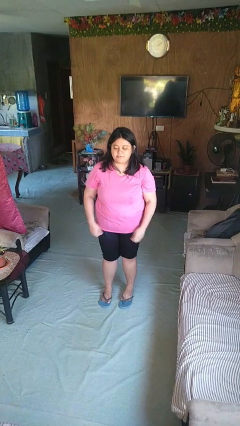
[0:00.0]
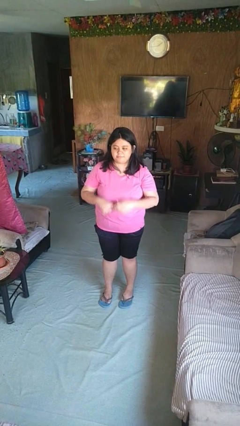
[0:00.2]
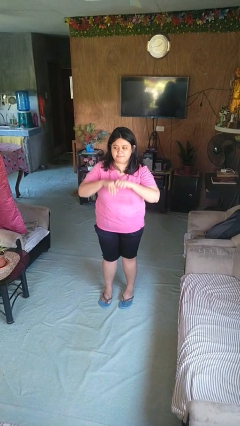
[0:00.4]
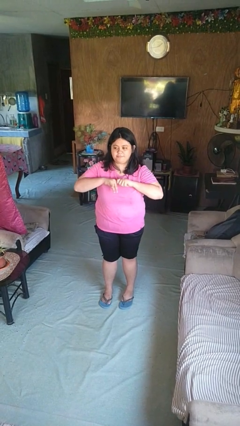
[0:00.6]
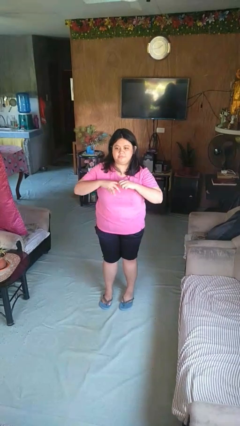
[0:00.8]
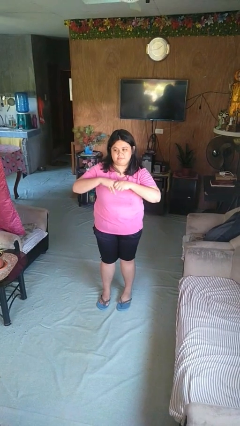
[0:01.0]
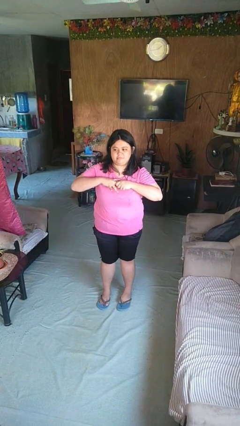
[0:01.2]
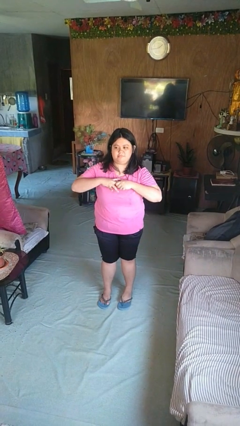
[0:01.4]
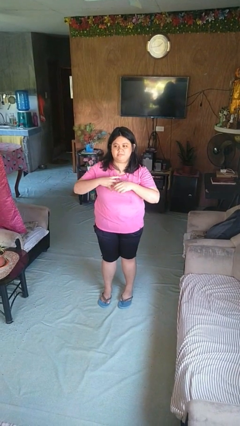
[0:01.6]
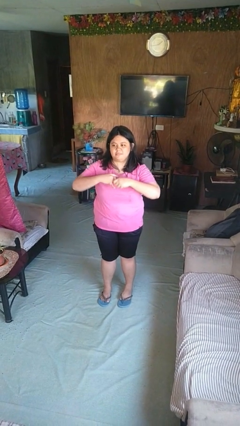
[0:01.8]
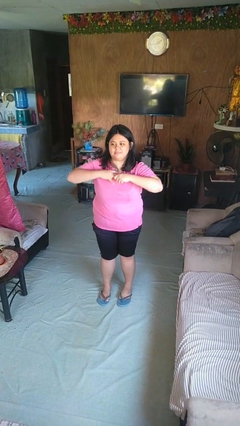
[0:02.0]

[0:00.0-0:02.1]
person cracks knuckles

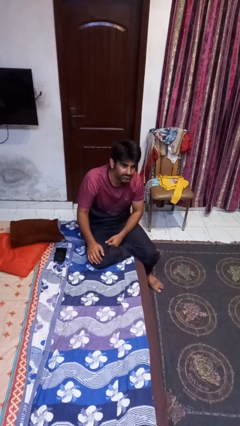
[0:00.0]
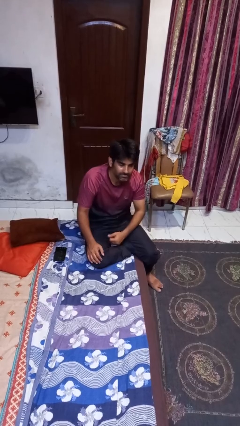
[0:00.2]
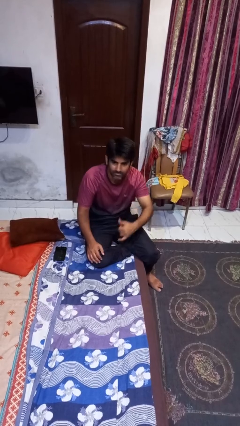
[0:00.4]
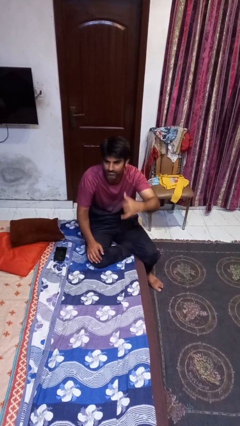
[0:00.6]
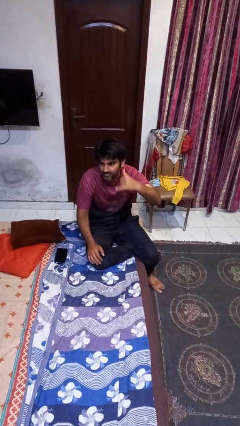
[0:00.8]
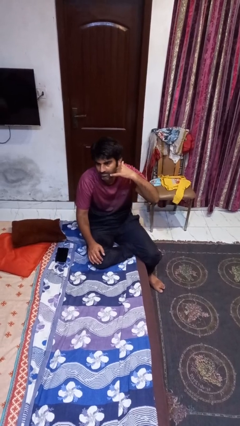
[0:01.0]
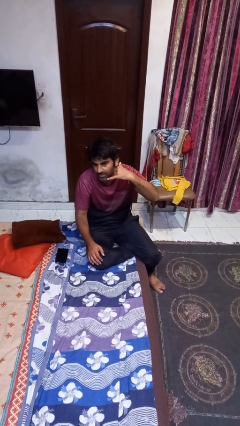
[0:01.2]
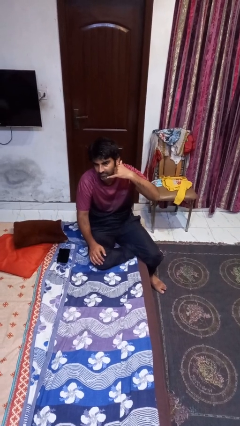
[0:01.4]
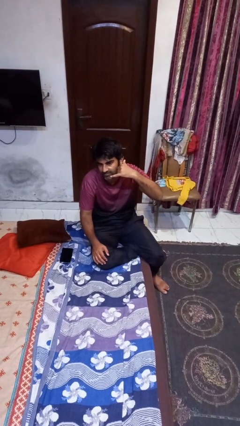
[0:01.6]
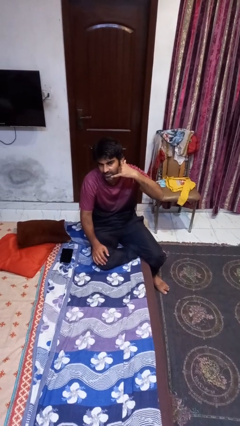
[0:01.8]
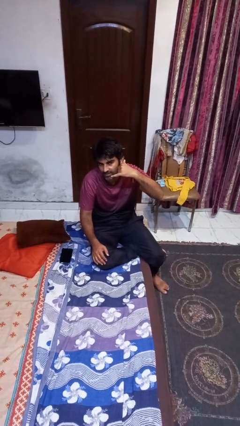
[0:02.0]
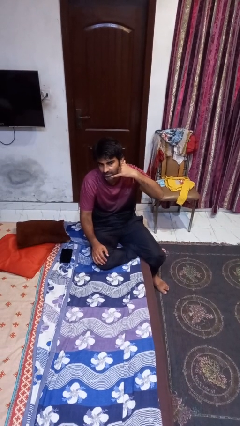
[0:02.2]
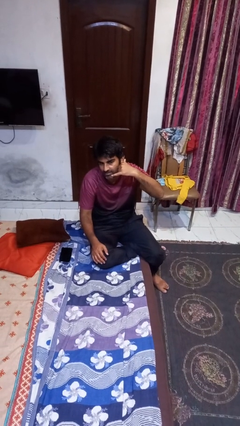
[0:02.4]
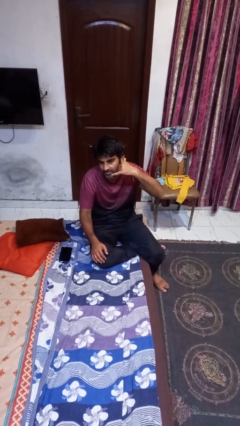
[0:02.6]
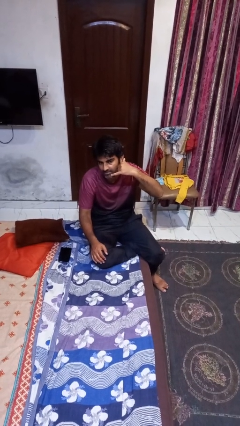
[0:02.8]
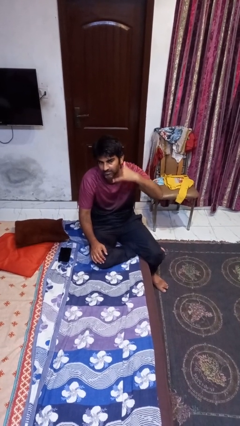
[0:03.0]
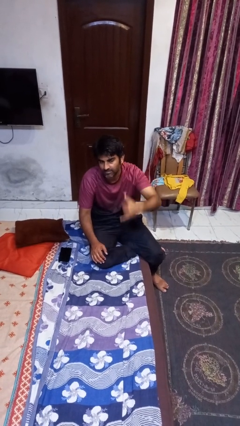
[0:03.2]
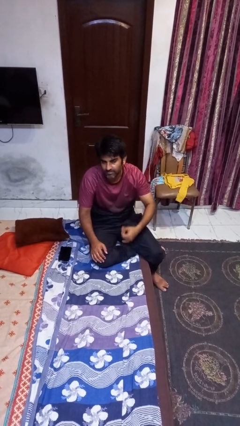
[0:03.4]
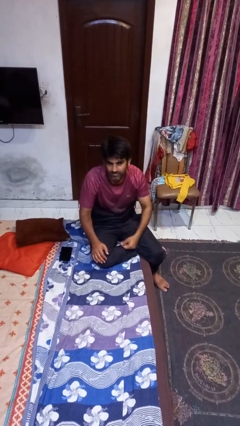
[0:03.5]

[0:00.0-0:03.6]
person gestures call me

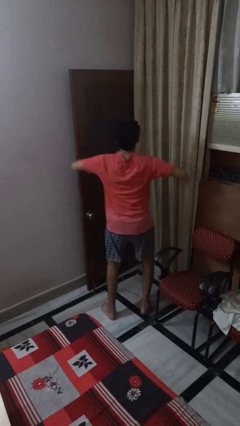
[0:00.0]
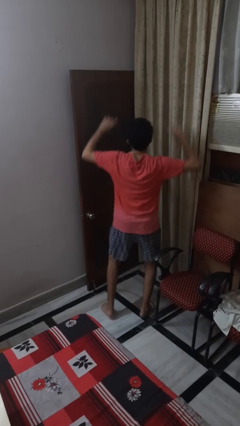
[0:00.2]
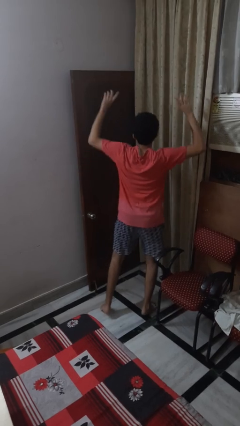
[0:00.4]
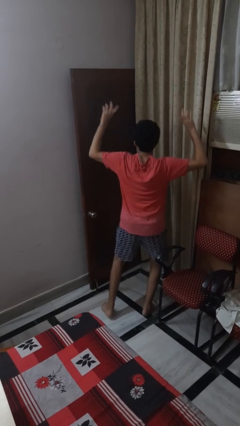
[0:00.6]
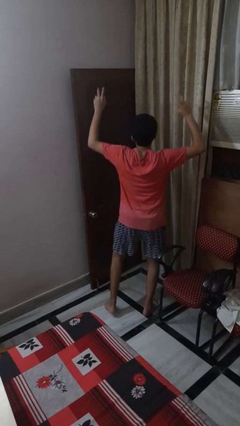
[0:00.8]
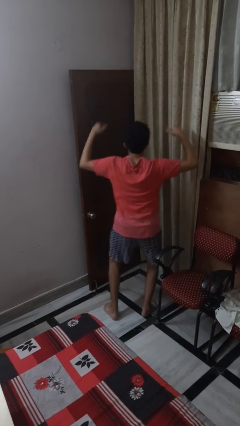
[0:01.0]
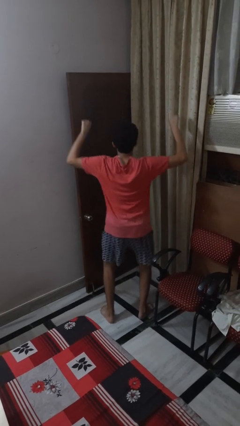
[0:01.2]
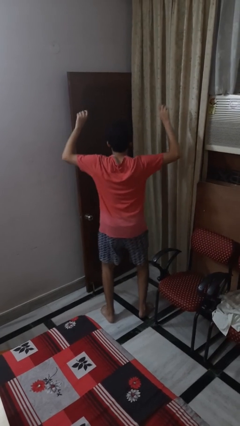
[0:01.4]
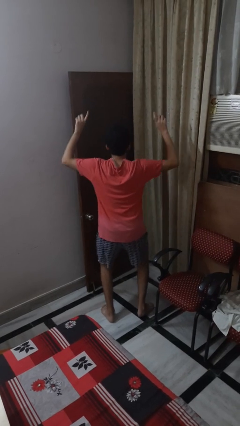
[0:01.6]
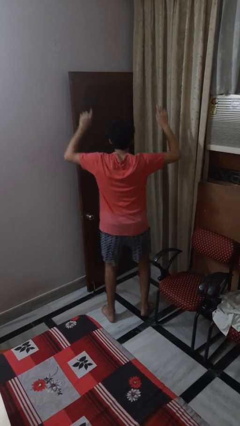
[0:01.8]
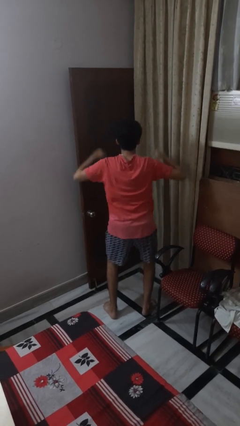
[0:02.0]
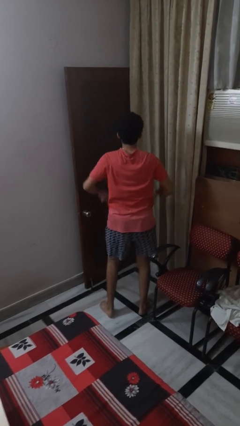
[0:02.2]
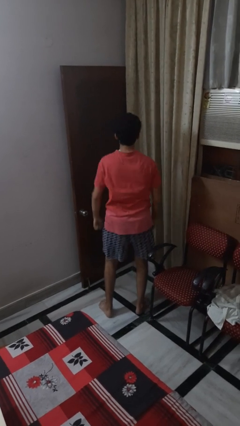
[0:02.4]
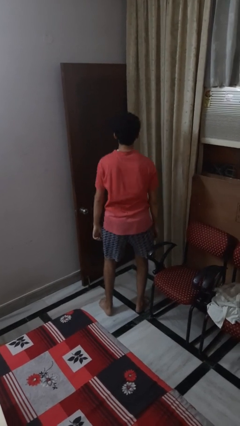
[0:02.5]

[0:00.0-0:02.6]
person dances in place

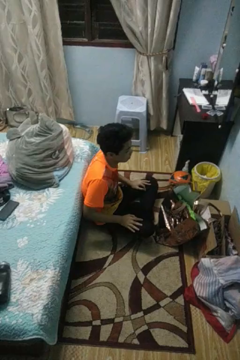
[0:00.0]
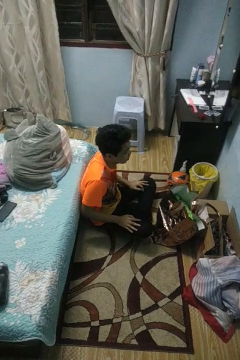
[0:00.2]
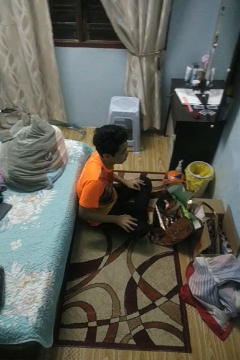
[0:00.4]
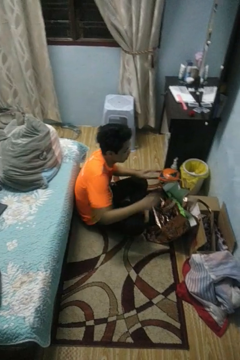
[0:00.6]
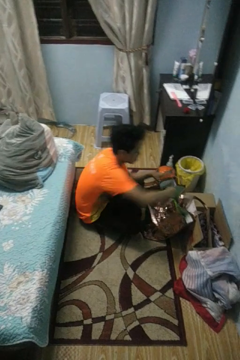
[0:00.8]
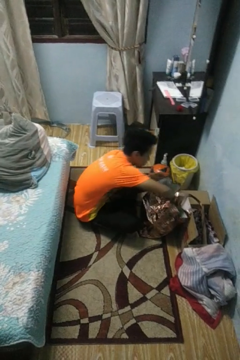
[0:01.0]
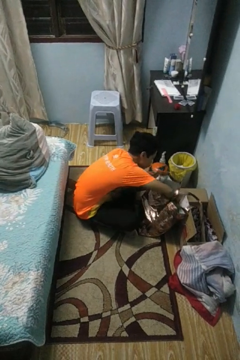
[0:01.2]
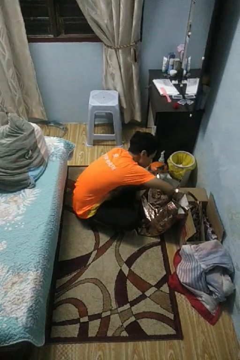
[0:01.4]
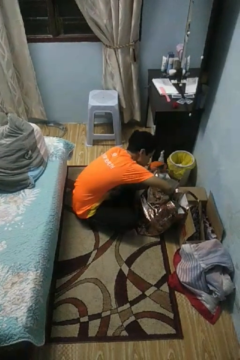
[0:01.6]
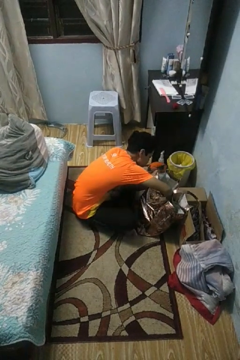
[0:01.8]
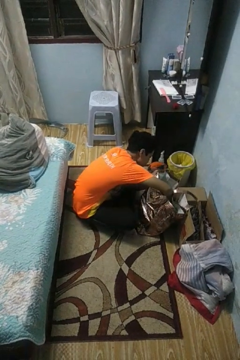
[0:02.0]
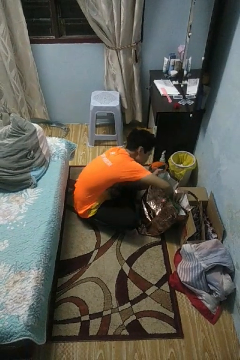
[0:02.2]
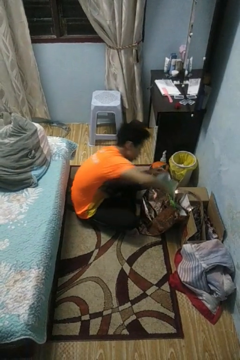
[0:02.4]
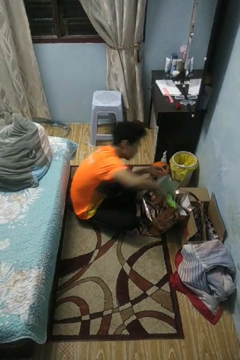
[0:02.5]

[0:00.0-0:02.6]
person searches in bag

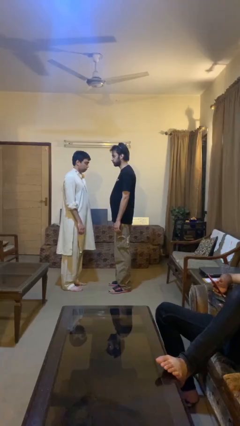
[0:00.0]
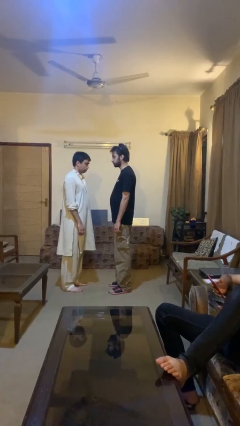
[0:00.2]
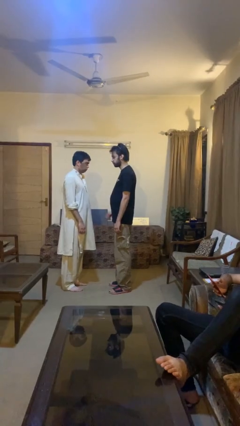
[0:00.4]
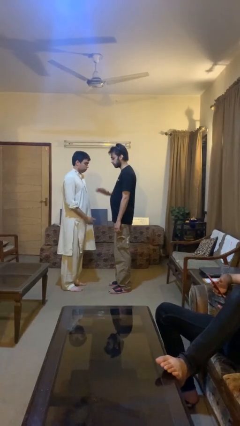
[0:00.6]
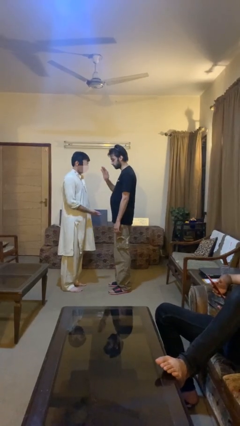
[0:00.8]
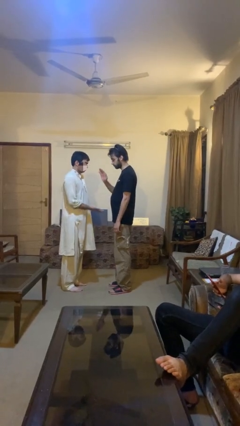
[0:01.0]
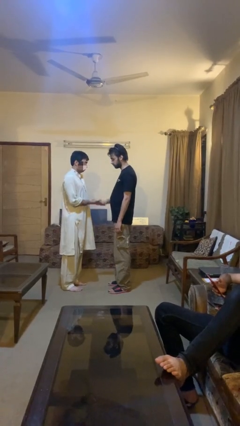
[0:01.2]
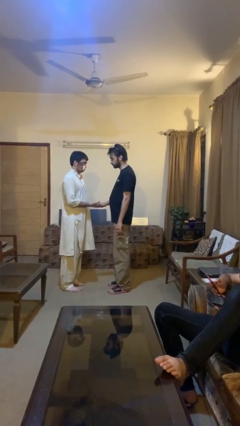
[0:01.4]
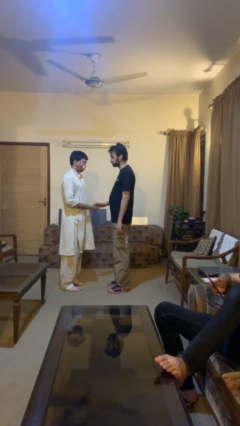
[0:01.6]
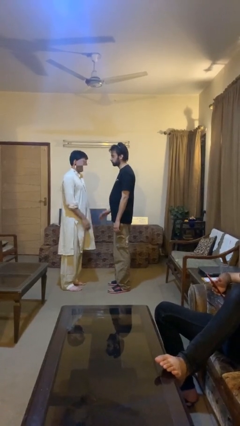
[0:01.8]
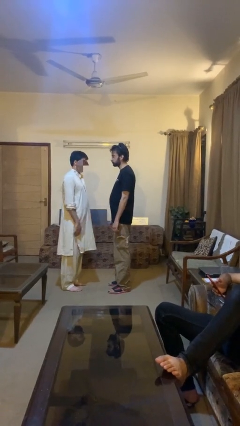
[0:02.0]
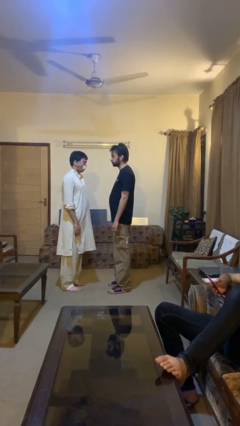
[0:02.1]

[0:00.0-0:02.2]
person highfives hand

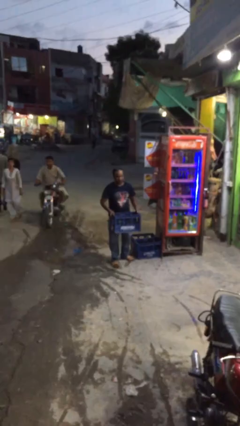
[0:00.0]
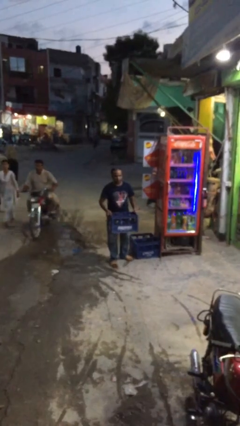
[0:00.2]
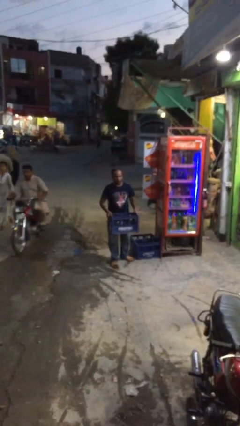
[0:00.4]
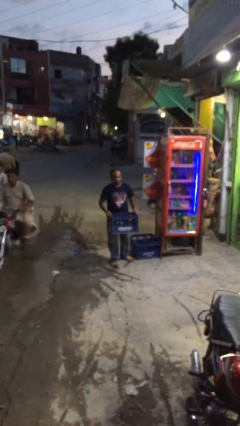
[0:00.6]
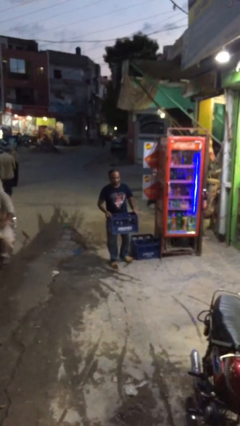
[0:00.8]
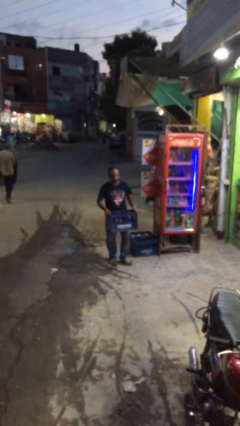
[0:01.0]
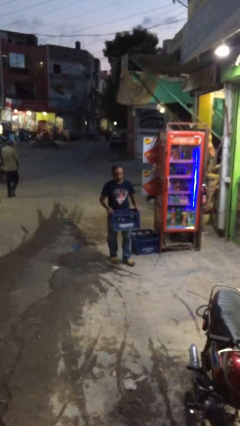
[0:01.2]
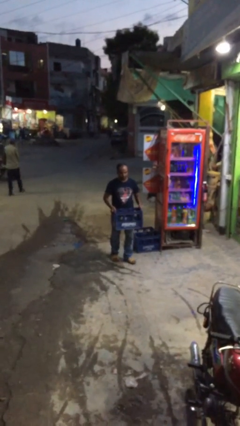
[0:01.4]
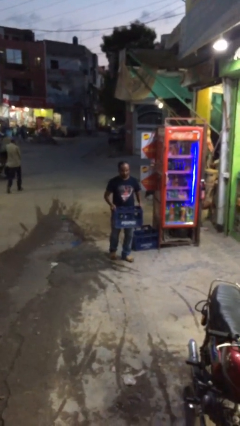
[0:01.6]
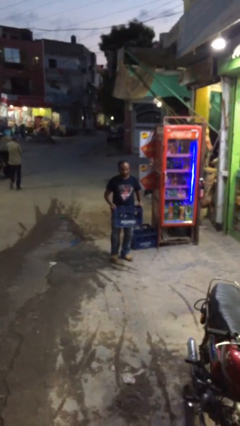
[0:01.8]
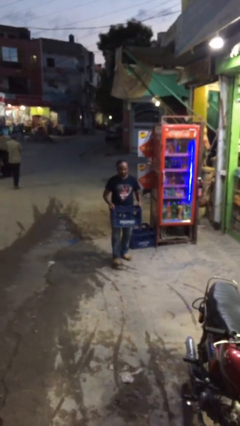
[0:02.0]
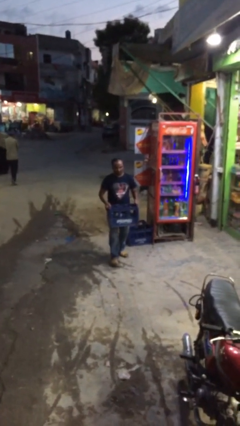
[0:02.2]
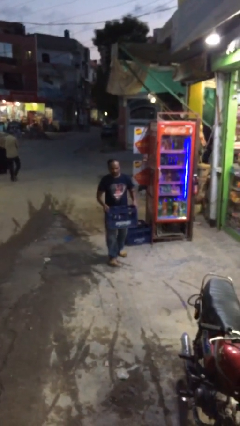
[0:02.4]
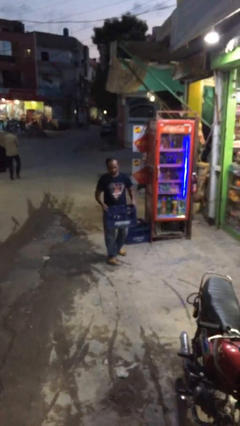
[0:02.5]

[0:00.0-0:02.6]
person carries heavy object

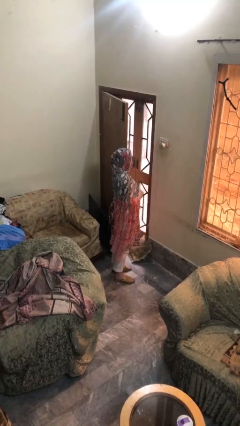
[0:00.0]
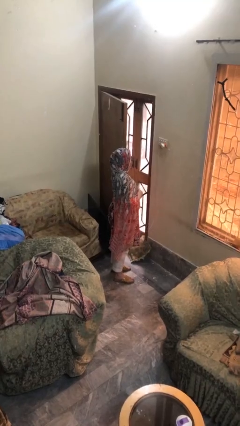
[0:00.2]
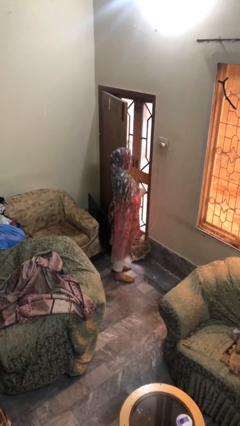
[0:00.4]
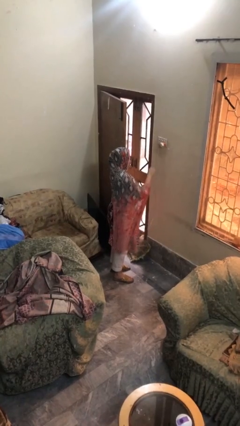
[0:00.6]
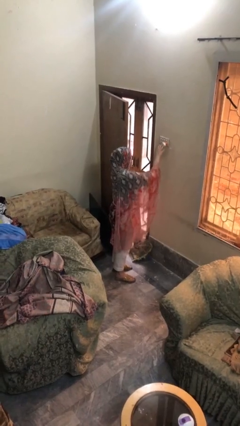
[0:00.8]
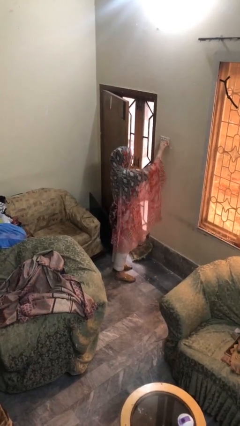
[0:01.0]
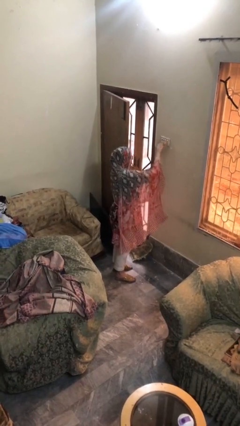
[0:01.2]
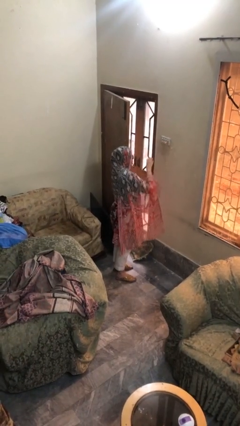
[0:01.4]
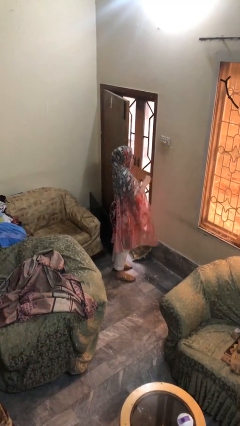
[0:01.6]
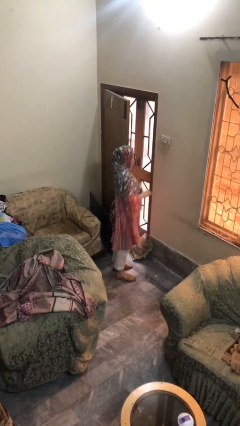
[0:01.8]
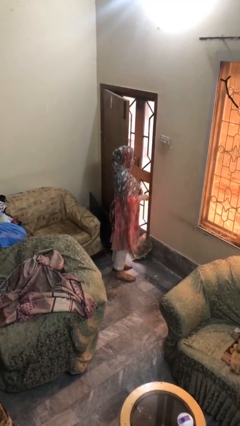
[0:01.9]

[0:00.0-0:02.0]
person unplugs from electrical socket
